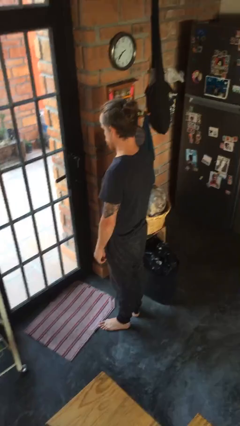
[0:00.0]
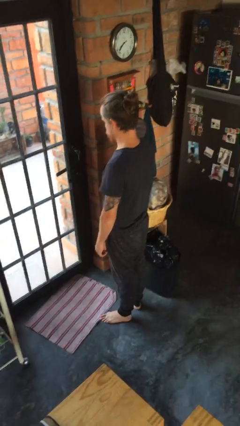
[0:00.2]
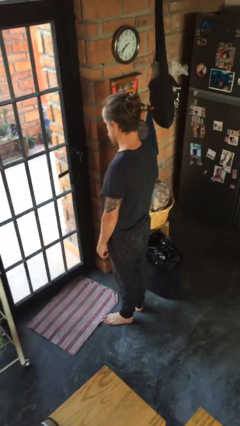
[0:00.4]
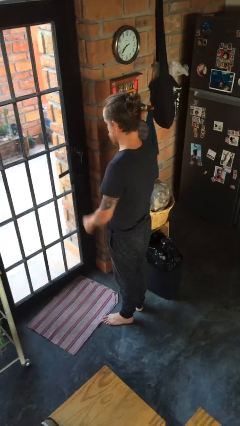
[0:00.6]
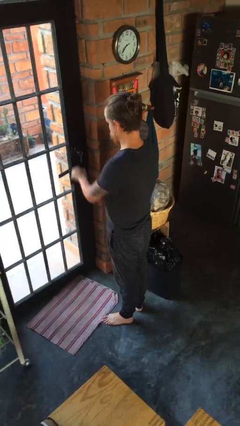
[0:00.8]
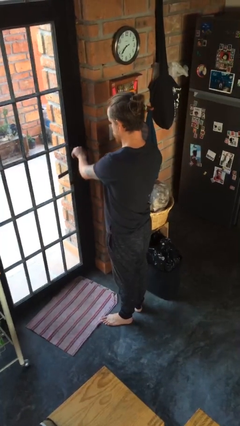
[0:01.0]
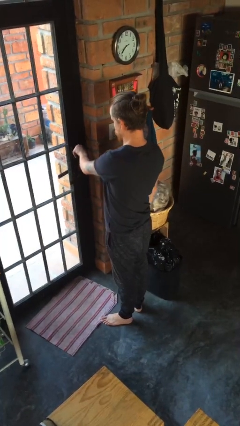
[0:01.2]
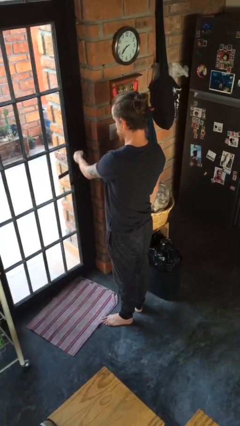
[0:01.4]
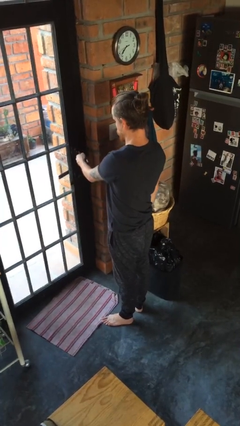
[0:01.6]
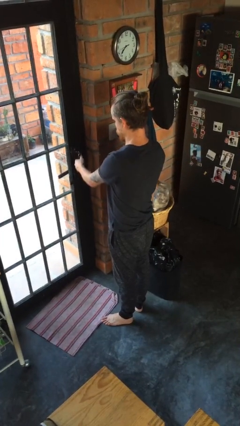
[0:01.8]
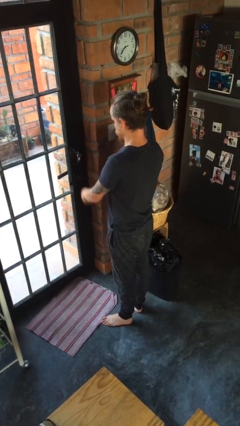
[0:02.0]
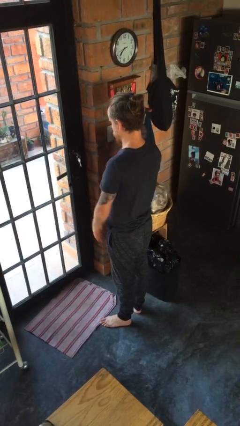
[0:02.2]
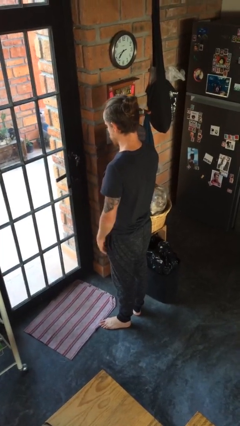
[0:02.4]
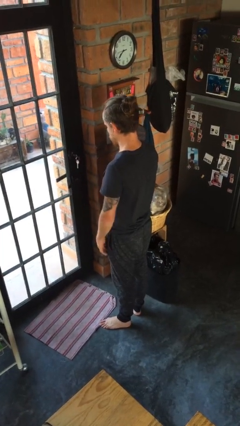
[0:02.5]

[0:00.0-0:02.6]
person unlocks door with keys

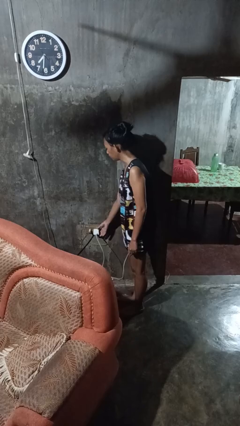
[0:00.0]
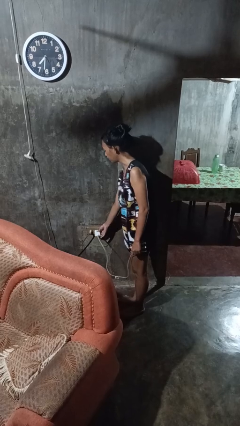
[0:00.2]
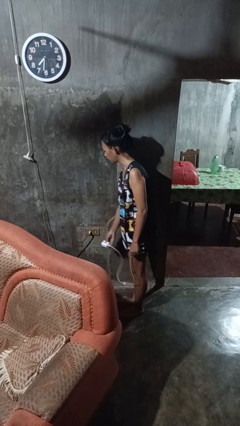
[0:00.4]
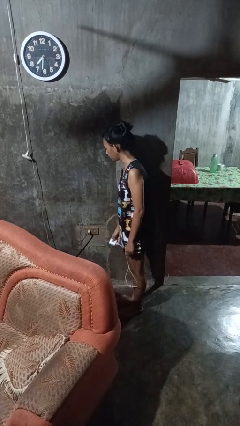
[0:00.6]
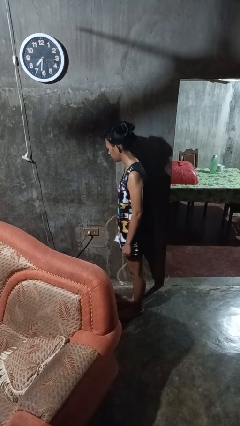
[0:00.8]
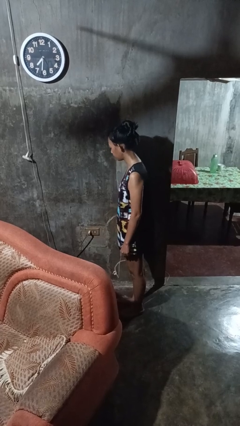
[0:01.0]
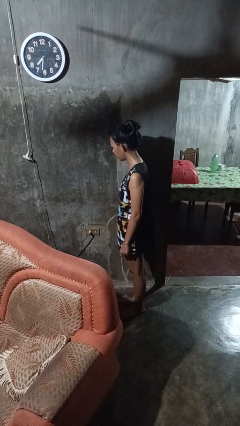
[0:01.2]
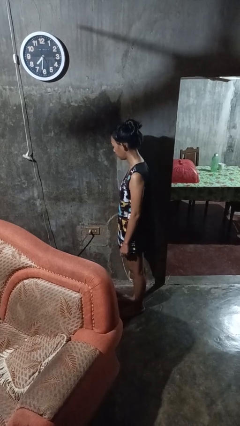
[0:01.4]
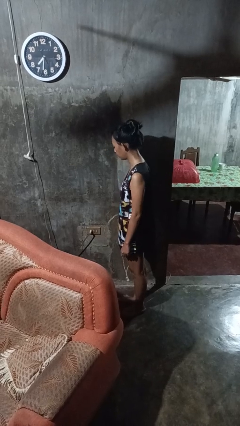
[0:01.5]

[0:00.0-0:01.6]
person unplugs from electrical socket

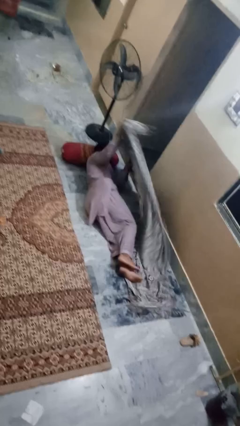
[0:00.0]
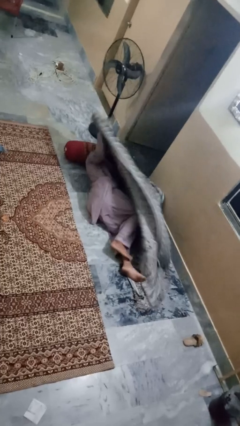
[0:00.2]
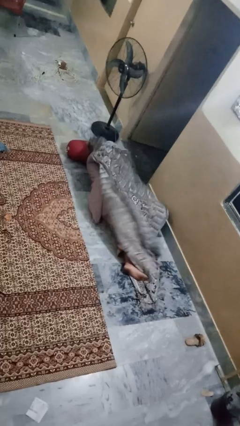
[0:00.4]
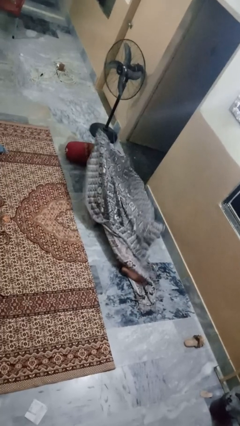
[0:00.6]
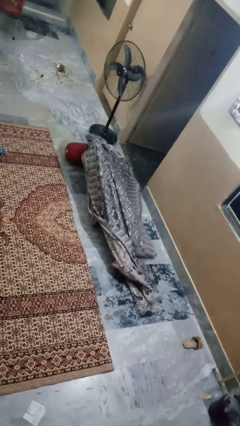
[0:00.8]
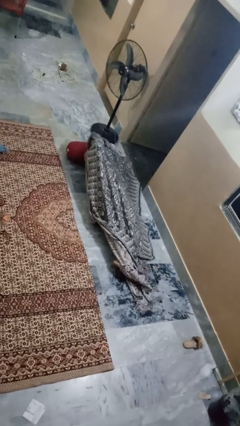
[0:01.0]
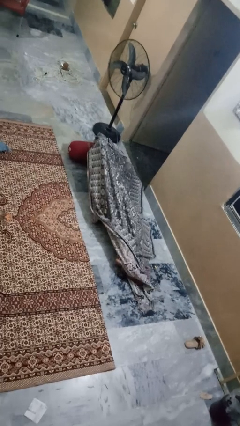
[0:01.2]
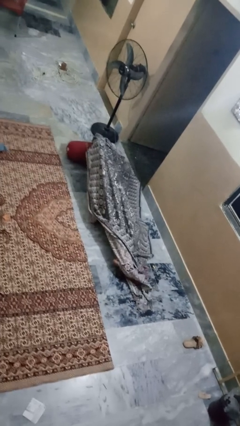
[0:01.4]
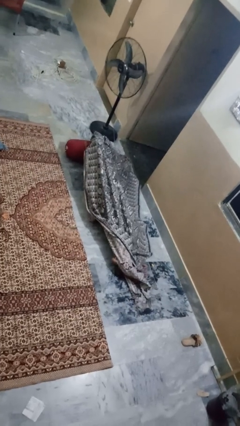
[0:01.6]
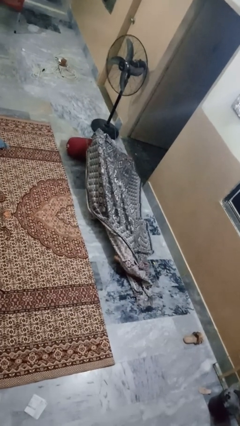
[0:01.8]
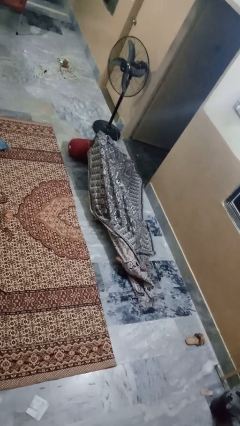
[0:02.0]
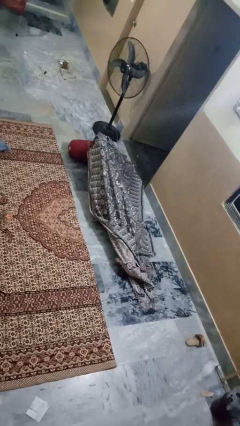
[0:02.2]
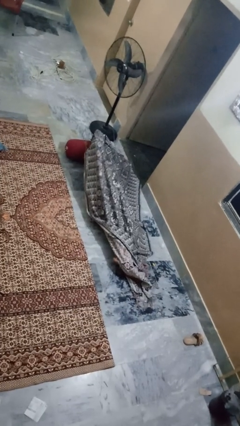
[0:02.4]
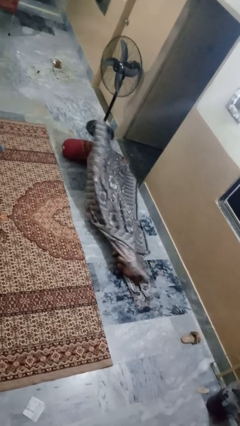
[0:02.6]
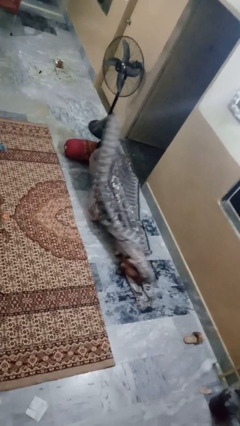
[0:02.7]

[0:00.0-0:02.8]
person covers with blanket

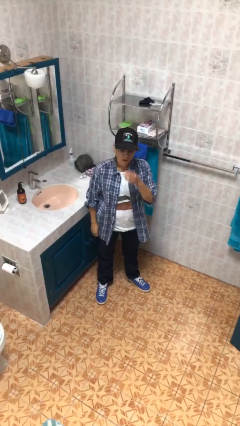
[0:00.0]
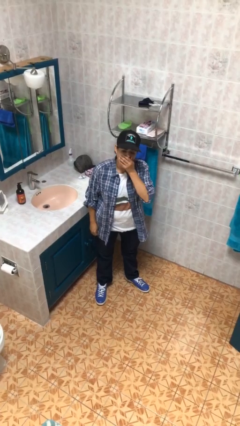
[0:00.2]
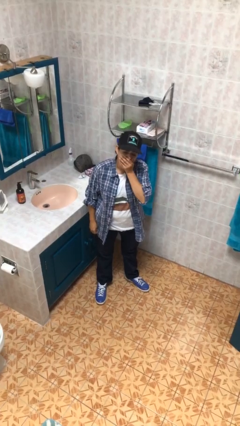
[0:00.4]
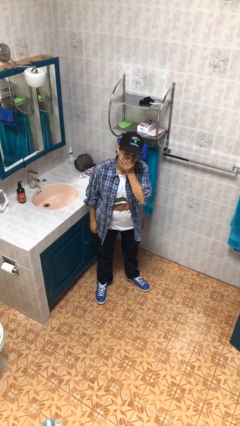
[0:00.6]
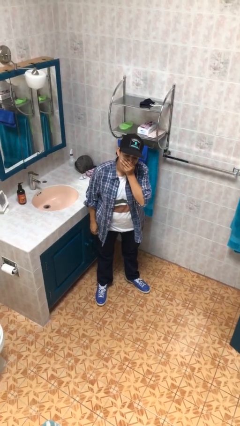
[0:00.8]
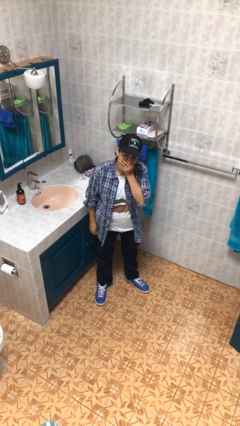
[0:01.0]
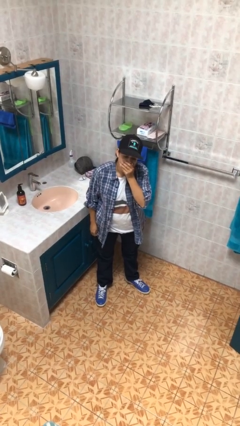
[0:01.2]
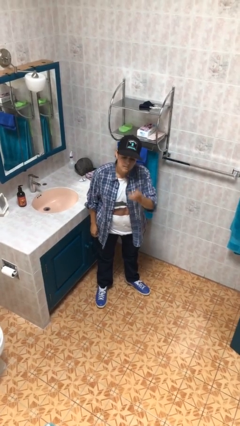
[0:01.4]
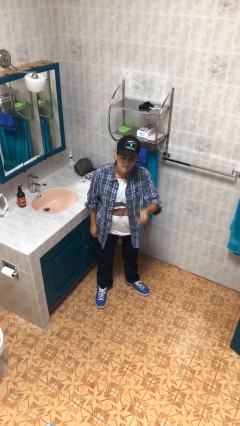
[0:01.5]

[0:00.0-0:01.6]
person yawns

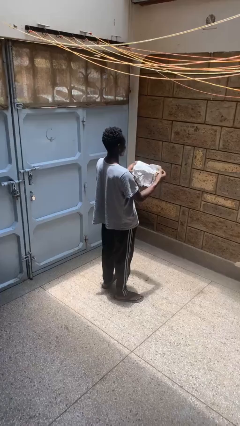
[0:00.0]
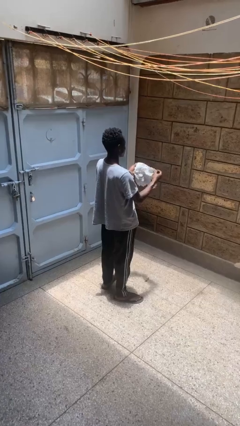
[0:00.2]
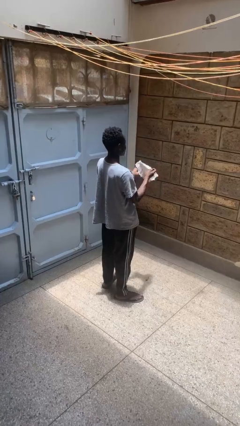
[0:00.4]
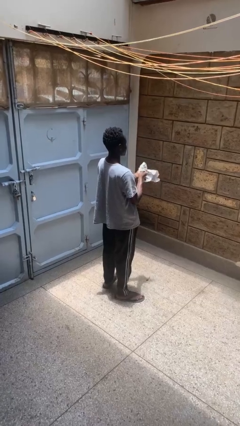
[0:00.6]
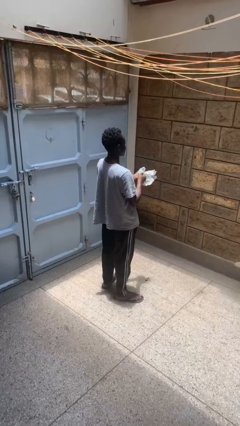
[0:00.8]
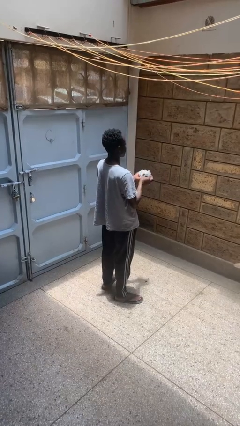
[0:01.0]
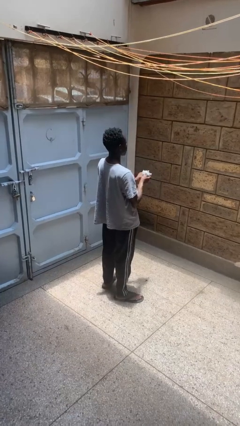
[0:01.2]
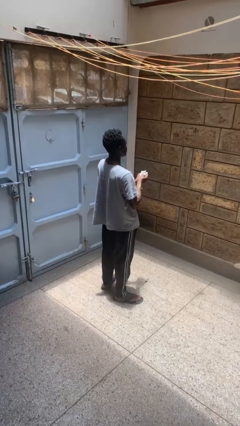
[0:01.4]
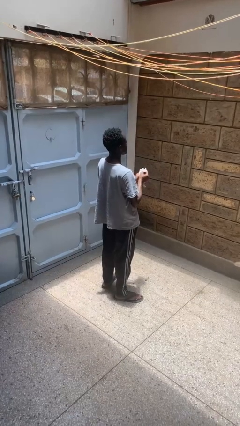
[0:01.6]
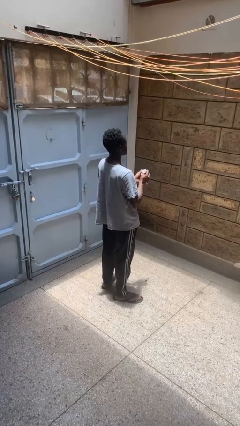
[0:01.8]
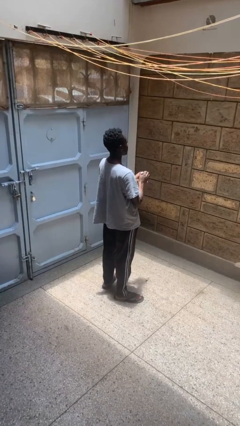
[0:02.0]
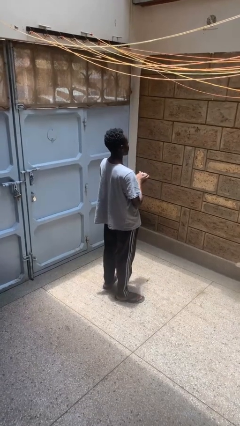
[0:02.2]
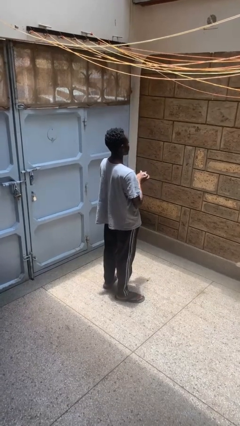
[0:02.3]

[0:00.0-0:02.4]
person crumples paper

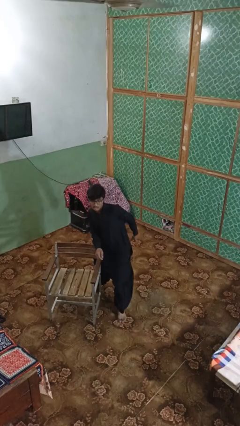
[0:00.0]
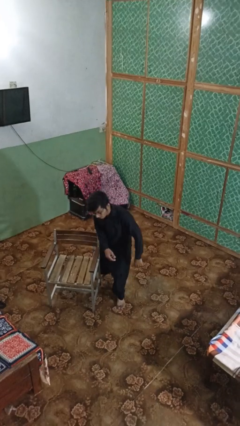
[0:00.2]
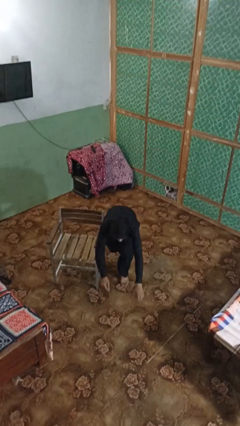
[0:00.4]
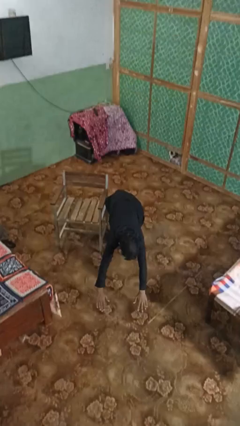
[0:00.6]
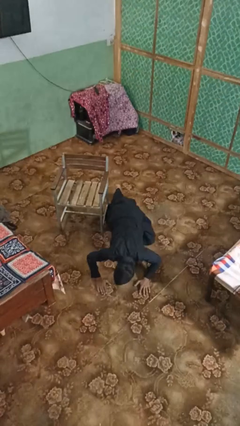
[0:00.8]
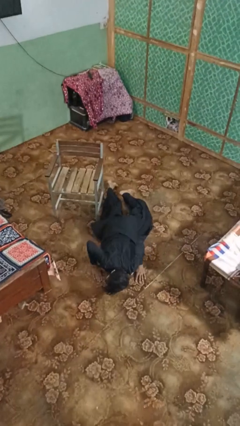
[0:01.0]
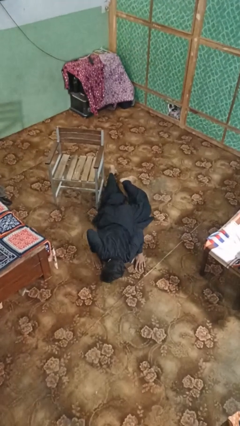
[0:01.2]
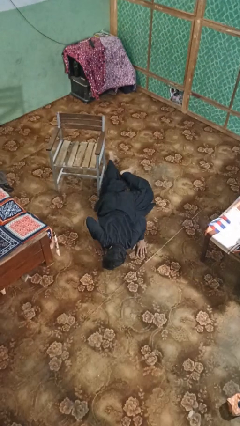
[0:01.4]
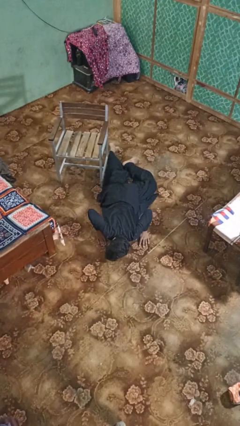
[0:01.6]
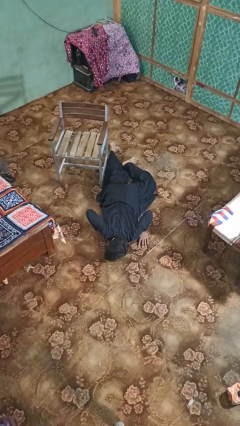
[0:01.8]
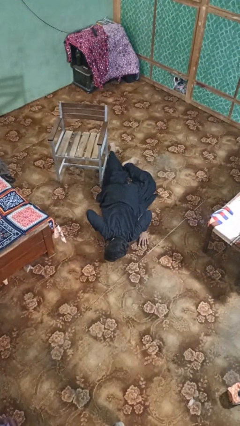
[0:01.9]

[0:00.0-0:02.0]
person lies down on floor

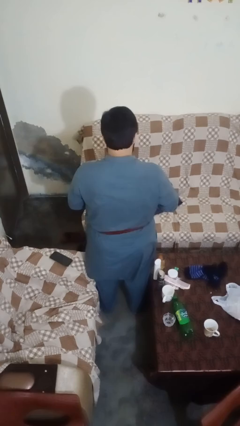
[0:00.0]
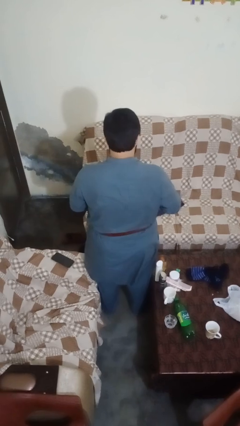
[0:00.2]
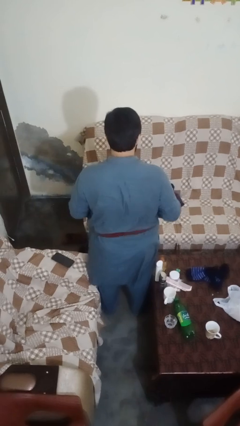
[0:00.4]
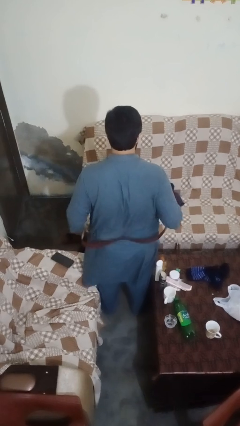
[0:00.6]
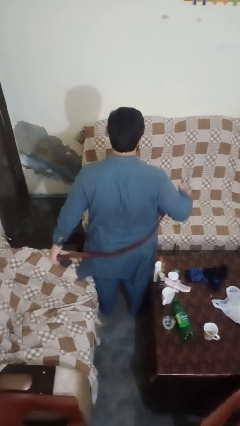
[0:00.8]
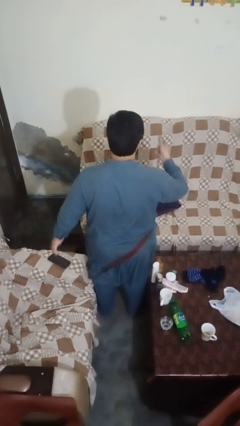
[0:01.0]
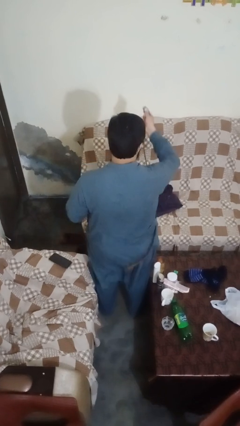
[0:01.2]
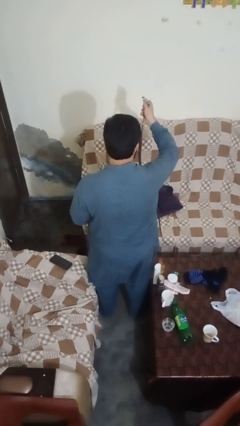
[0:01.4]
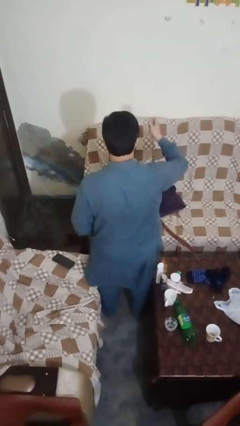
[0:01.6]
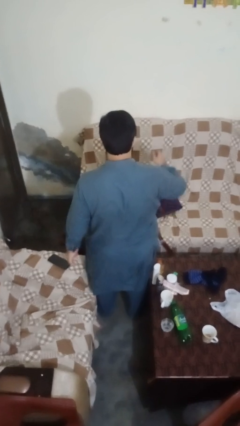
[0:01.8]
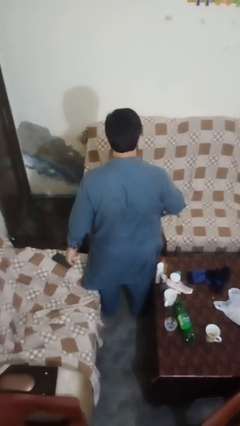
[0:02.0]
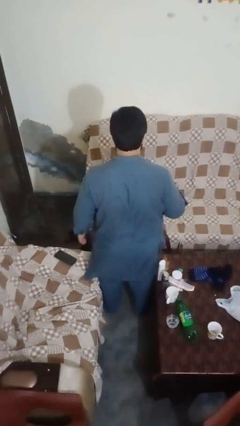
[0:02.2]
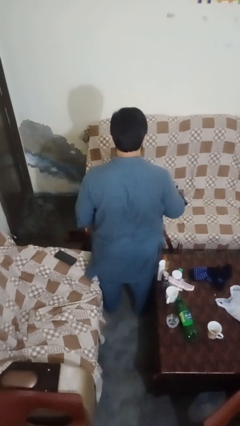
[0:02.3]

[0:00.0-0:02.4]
person takes off belt

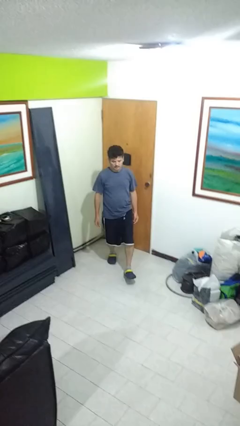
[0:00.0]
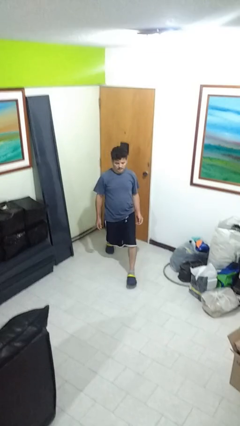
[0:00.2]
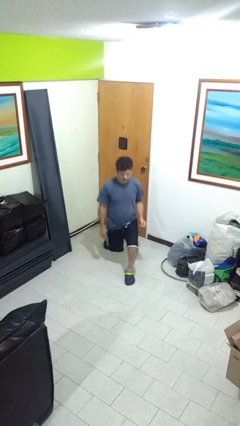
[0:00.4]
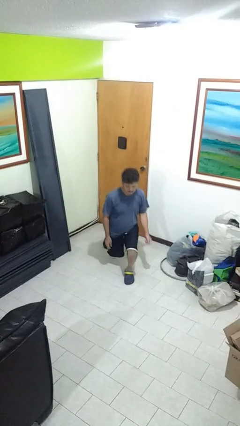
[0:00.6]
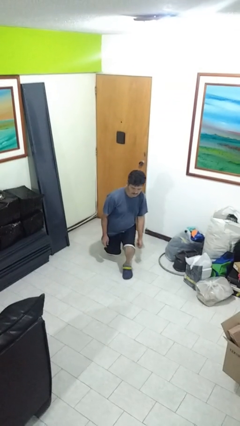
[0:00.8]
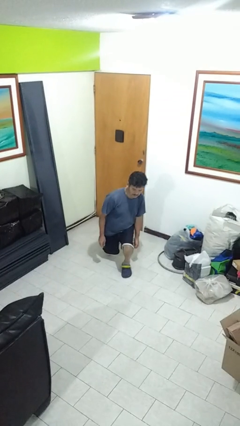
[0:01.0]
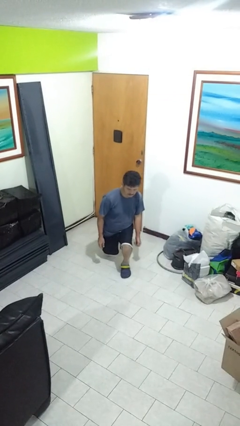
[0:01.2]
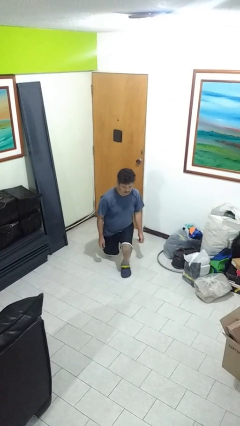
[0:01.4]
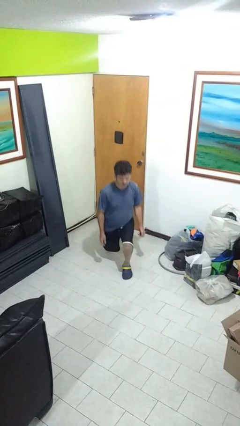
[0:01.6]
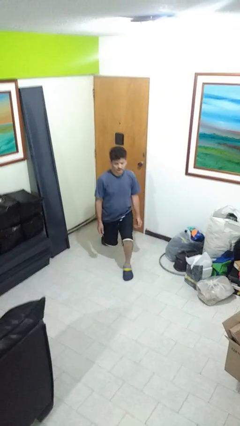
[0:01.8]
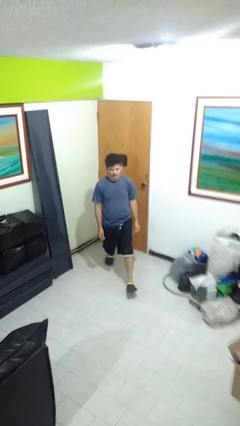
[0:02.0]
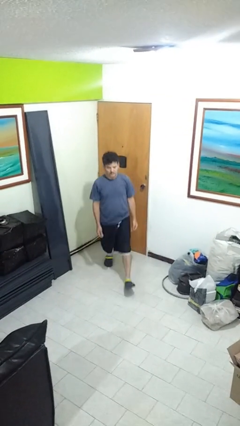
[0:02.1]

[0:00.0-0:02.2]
person exercises with lunges
